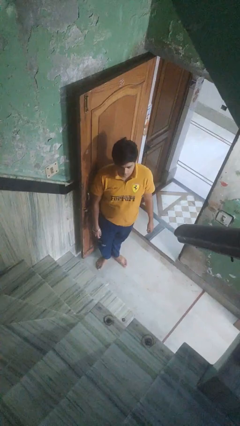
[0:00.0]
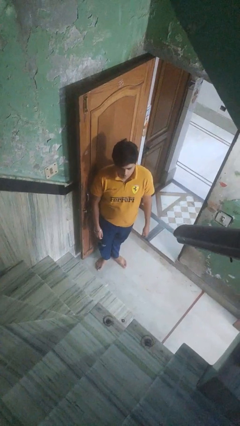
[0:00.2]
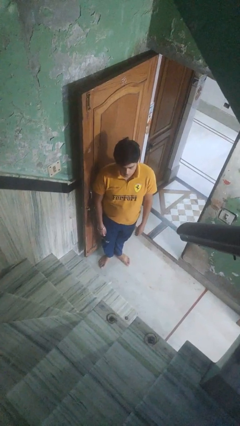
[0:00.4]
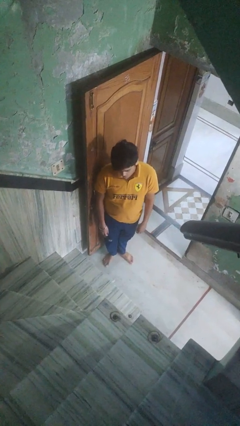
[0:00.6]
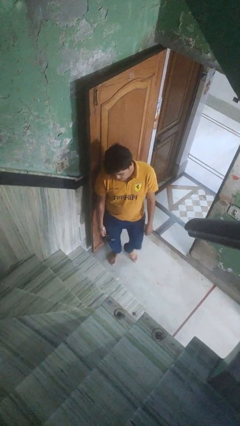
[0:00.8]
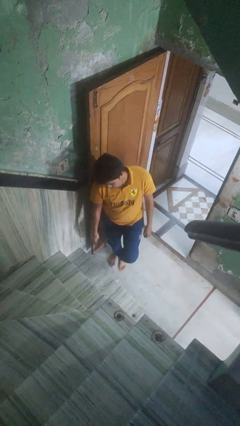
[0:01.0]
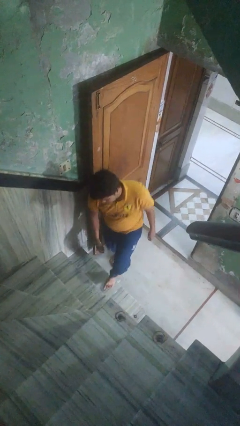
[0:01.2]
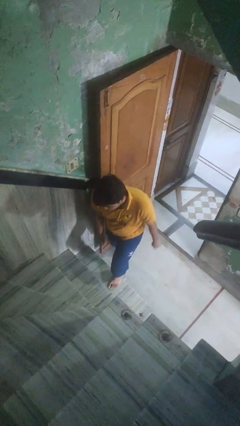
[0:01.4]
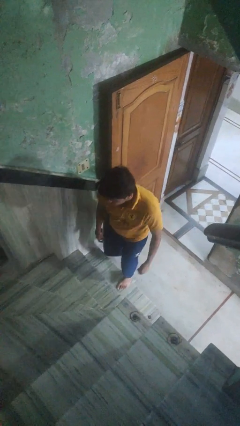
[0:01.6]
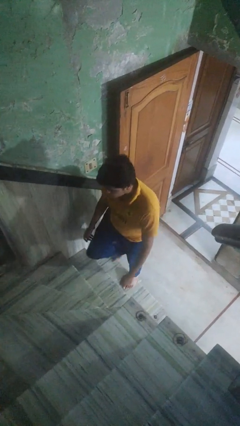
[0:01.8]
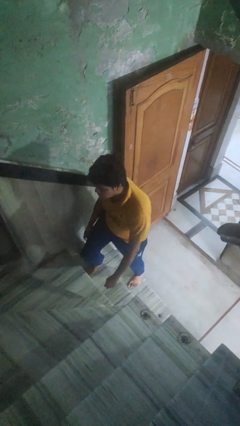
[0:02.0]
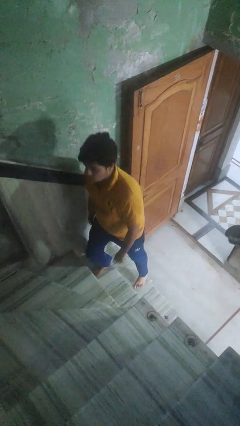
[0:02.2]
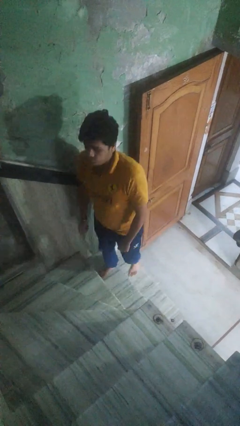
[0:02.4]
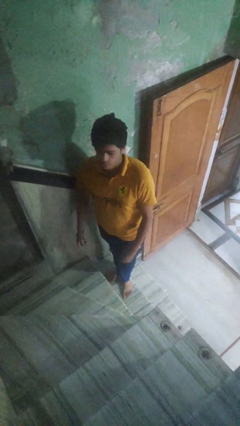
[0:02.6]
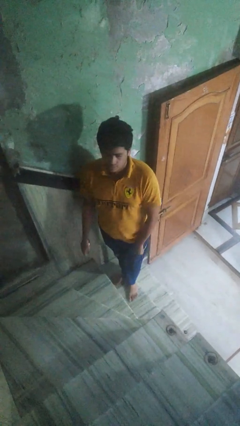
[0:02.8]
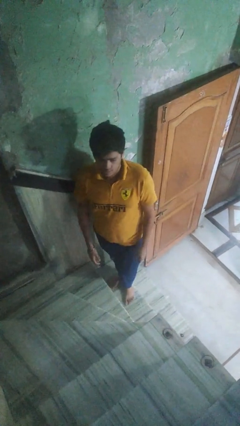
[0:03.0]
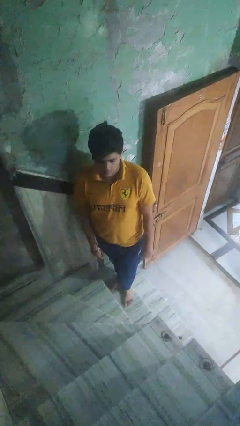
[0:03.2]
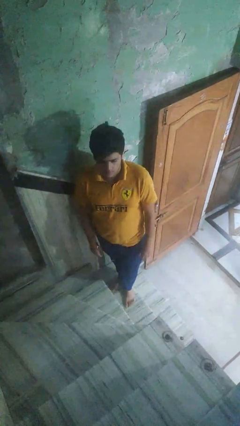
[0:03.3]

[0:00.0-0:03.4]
person climbs up stairs

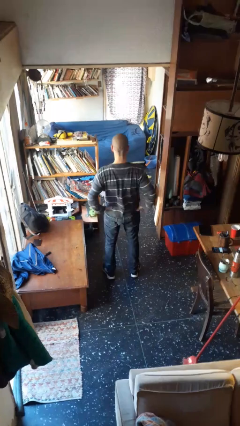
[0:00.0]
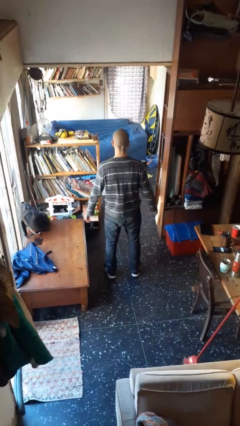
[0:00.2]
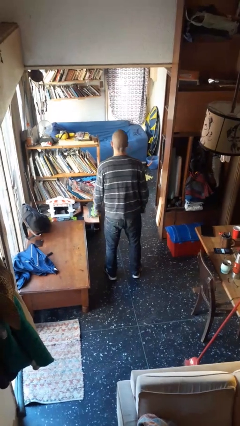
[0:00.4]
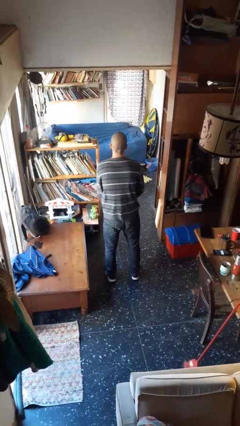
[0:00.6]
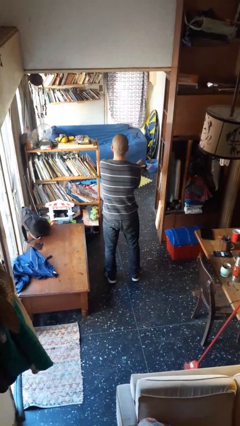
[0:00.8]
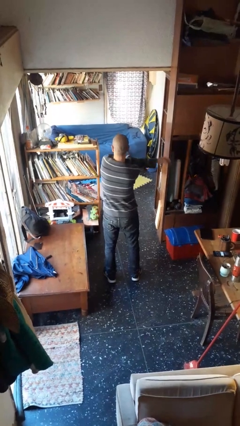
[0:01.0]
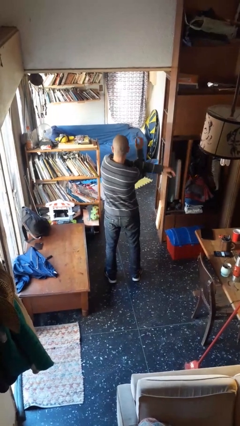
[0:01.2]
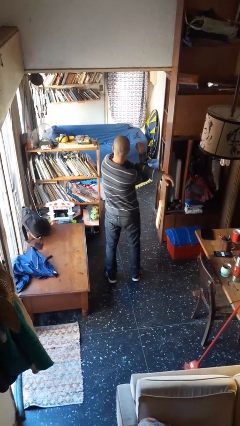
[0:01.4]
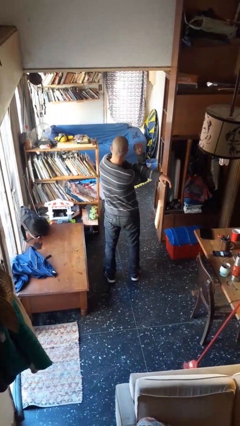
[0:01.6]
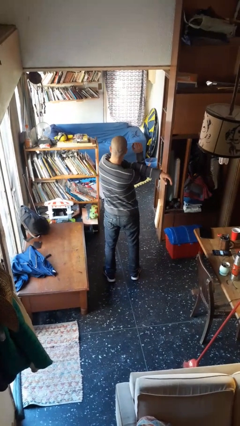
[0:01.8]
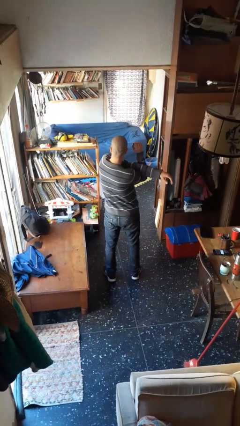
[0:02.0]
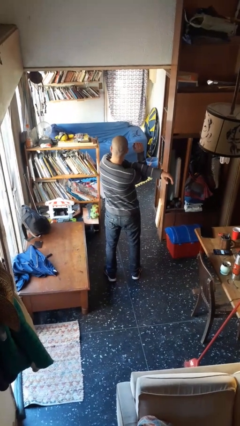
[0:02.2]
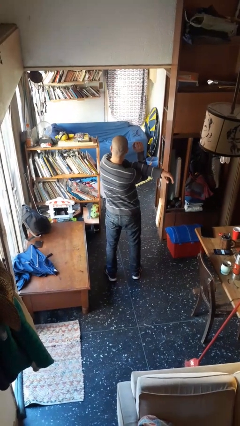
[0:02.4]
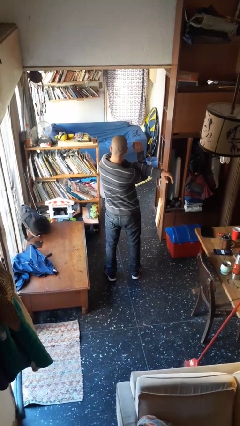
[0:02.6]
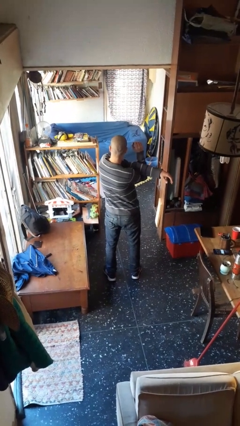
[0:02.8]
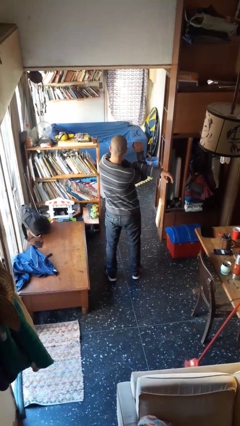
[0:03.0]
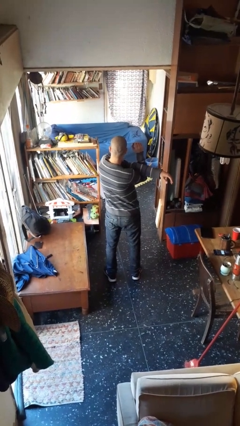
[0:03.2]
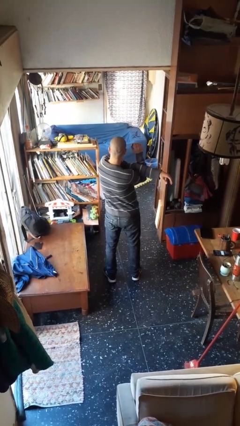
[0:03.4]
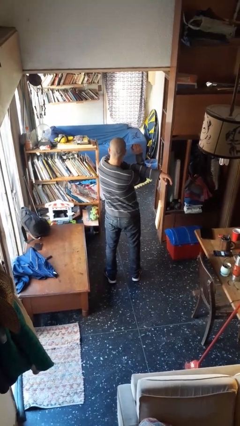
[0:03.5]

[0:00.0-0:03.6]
person stretches arms to side

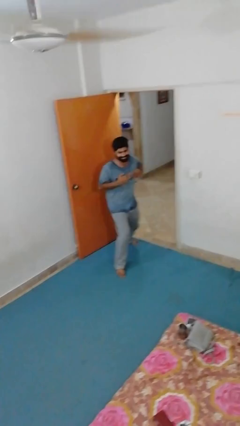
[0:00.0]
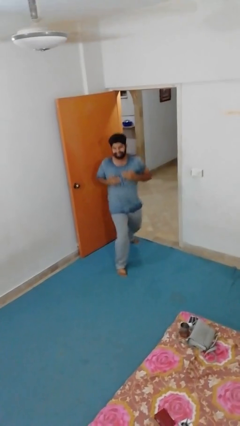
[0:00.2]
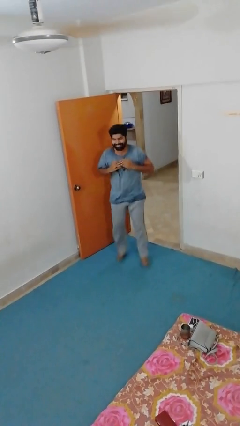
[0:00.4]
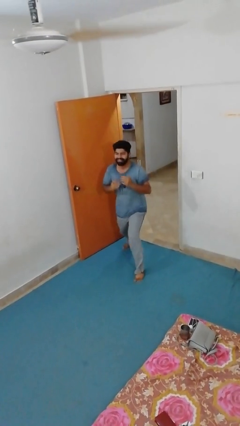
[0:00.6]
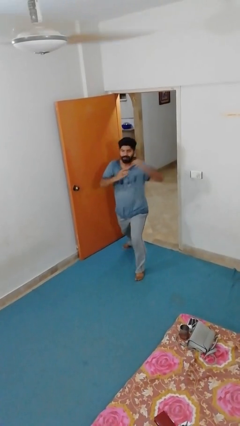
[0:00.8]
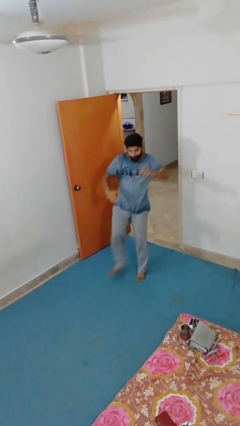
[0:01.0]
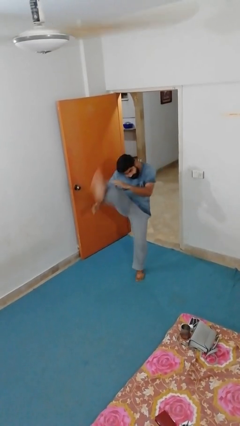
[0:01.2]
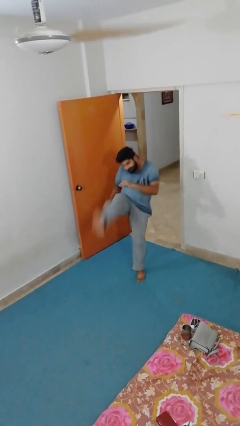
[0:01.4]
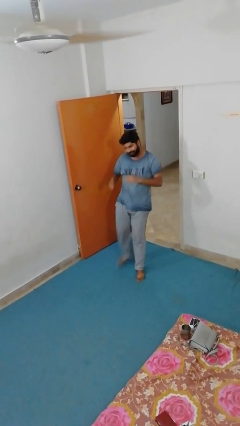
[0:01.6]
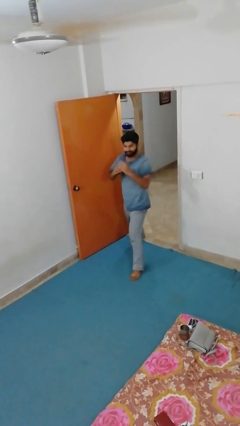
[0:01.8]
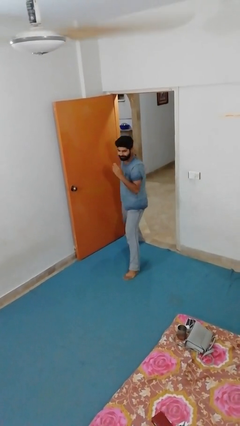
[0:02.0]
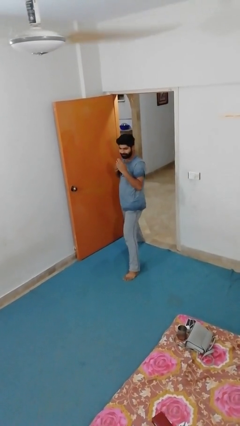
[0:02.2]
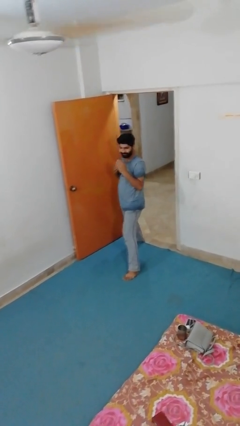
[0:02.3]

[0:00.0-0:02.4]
person karate kicks

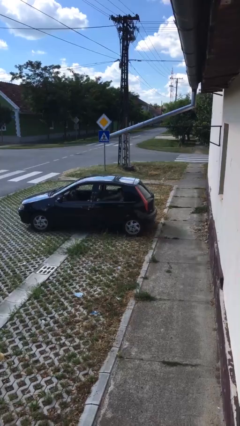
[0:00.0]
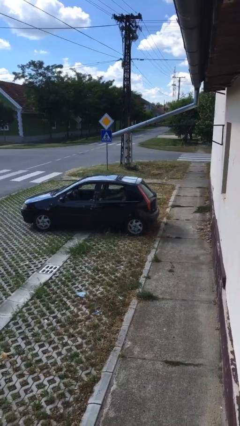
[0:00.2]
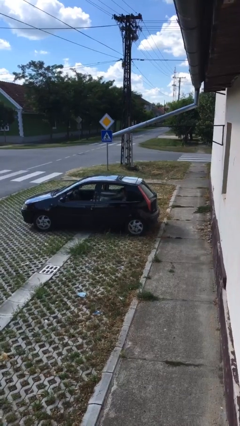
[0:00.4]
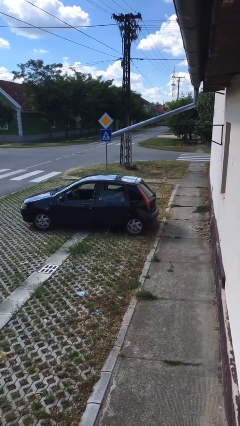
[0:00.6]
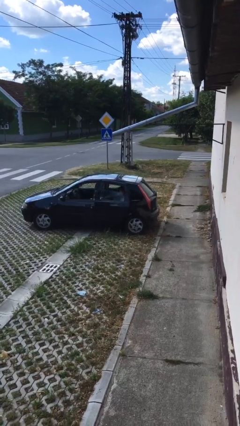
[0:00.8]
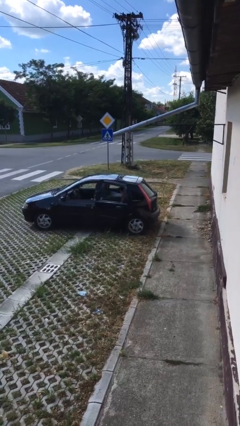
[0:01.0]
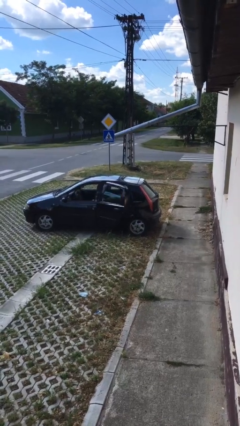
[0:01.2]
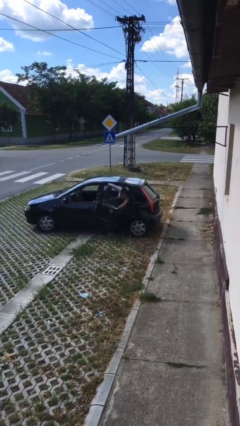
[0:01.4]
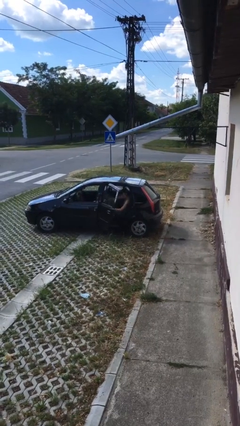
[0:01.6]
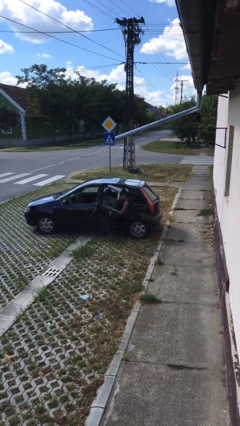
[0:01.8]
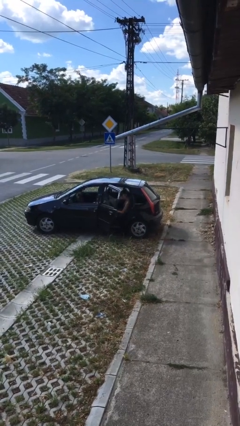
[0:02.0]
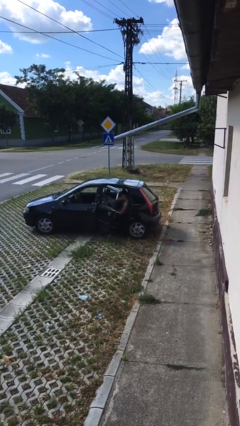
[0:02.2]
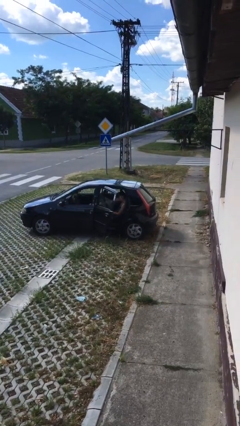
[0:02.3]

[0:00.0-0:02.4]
person opens car door

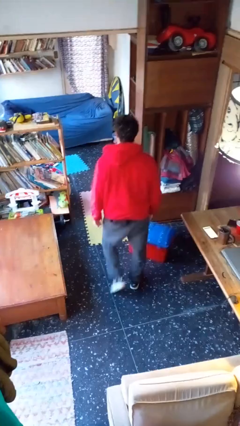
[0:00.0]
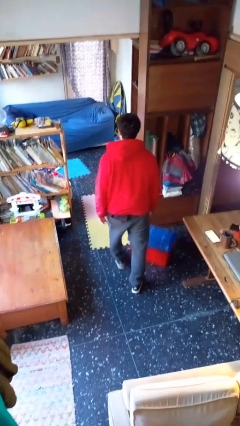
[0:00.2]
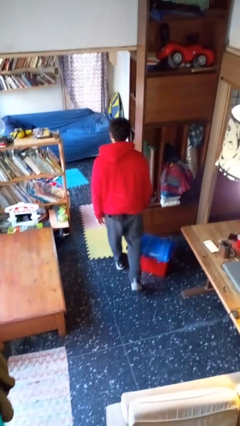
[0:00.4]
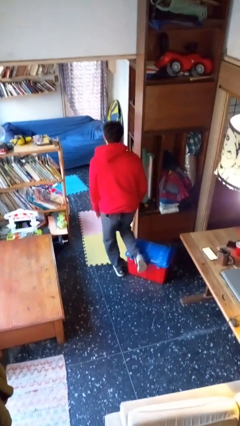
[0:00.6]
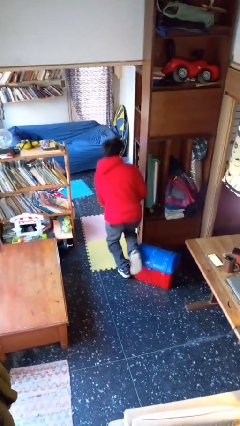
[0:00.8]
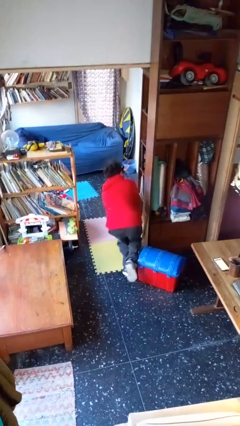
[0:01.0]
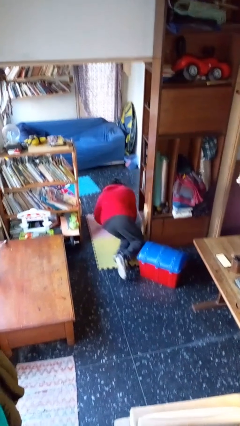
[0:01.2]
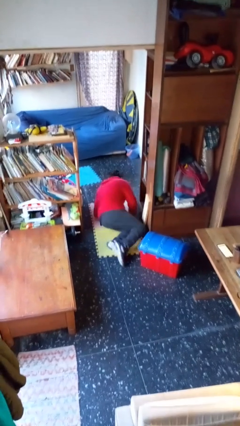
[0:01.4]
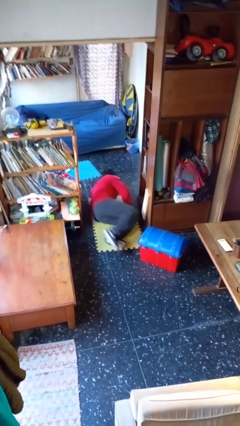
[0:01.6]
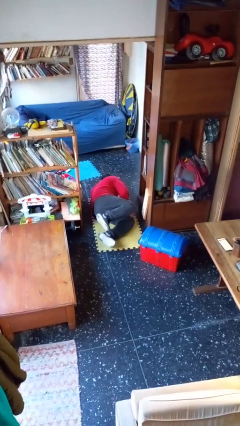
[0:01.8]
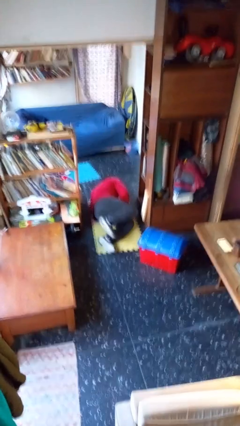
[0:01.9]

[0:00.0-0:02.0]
person trips on object on floor

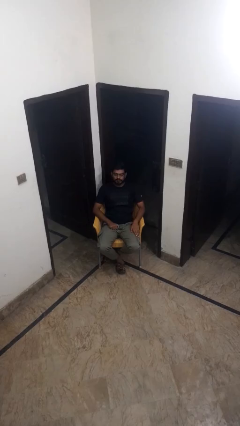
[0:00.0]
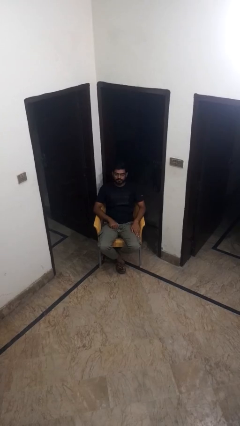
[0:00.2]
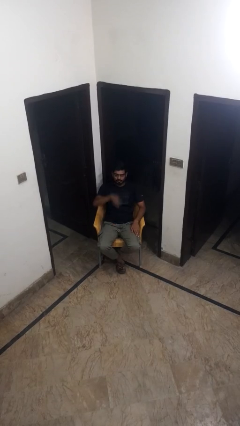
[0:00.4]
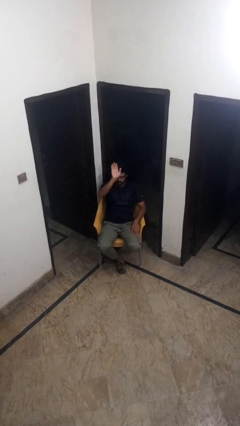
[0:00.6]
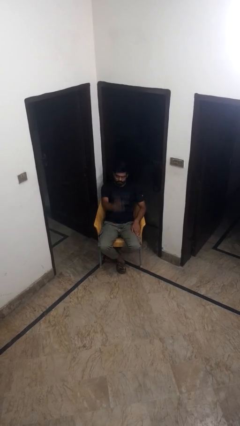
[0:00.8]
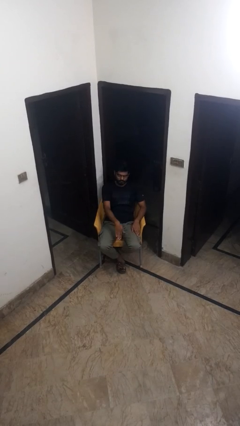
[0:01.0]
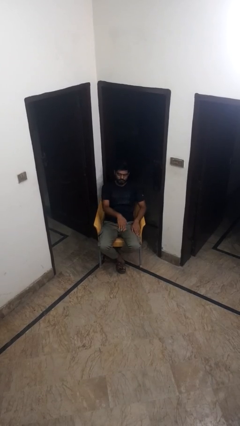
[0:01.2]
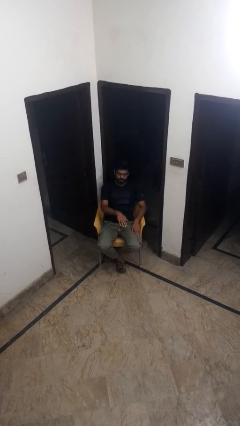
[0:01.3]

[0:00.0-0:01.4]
person gestures swipe down

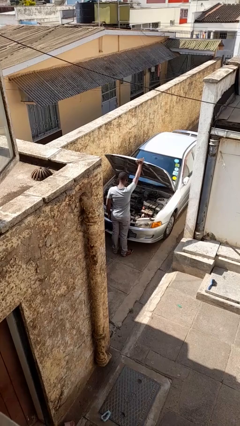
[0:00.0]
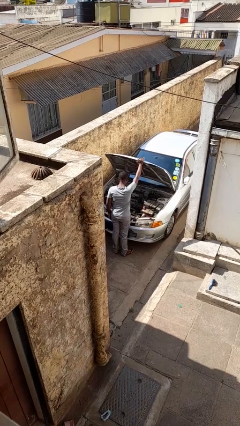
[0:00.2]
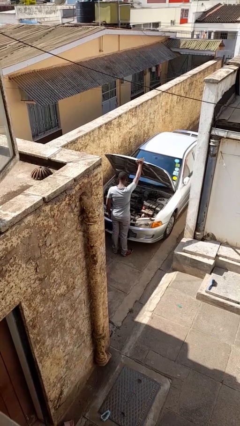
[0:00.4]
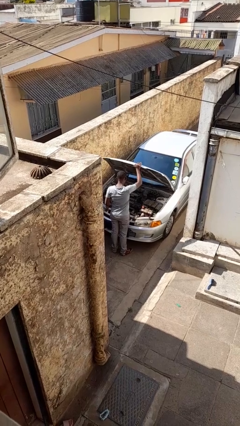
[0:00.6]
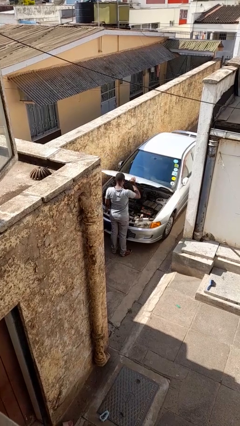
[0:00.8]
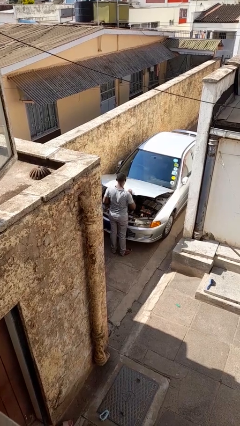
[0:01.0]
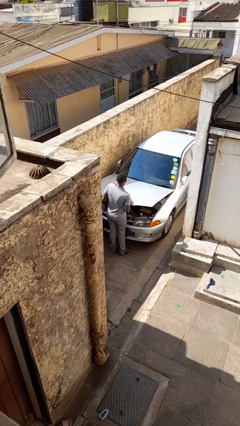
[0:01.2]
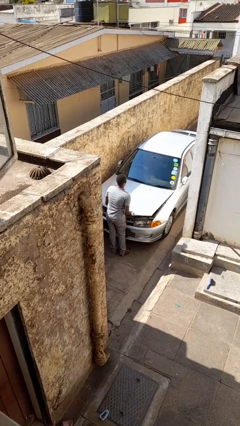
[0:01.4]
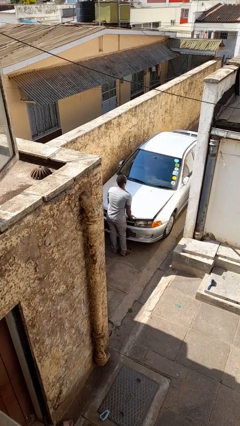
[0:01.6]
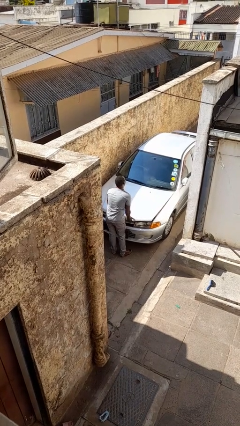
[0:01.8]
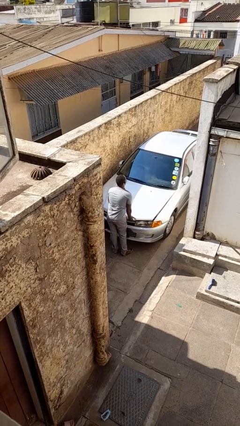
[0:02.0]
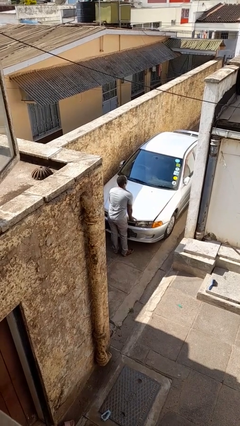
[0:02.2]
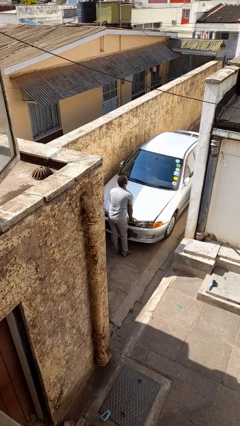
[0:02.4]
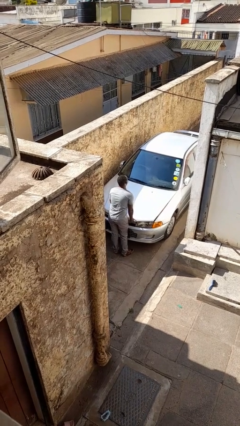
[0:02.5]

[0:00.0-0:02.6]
person closes car hood
